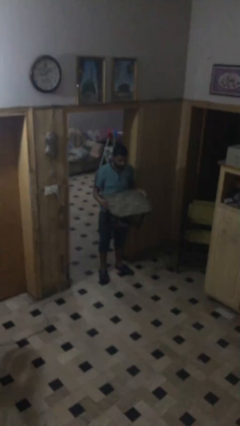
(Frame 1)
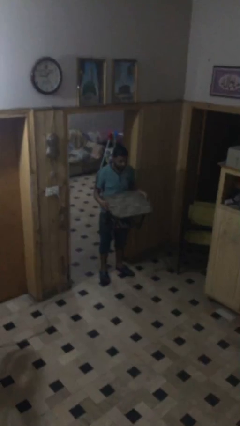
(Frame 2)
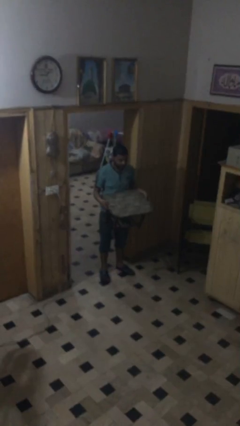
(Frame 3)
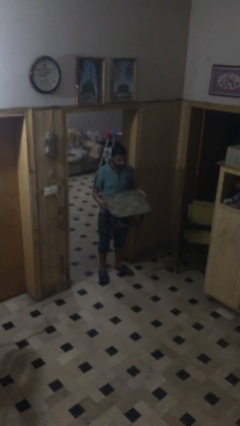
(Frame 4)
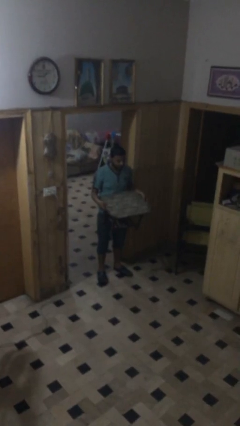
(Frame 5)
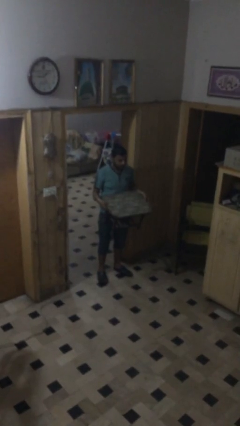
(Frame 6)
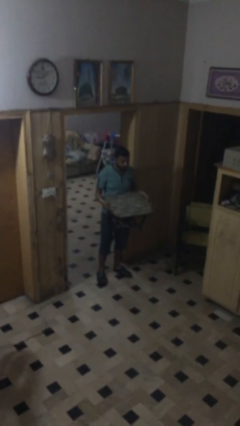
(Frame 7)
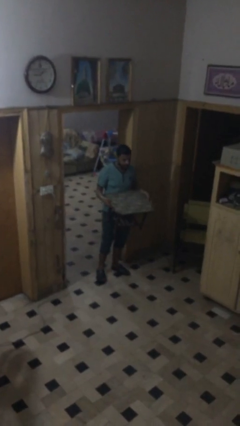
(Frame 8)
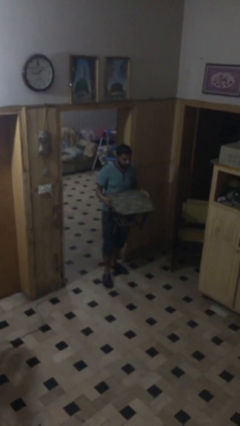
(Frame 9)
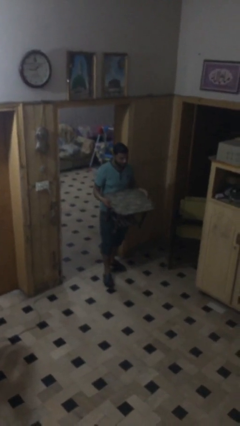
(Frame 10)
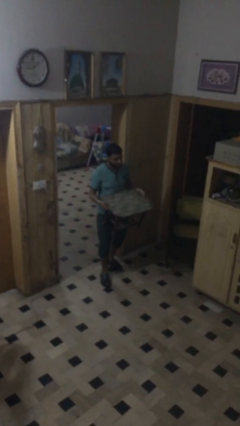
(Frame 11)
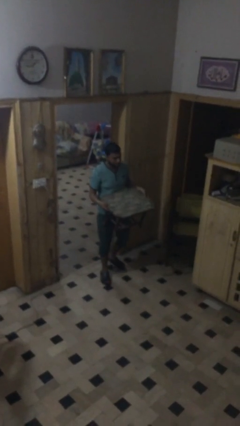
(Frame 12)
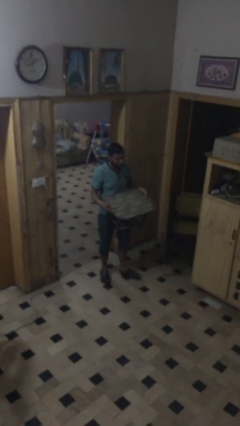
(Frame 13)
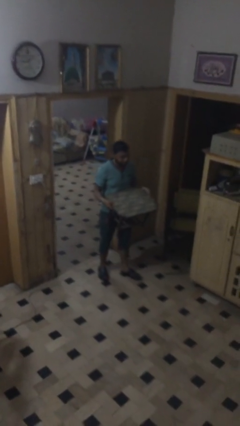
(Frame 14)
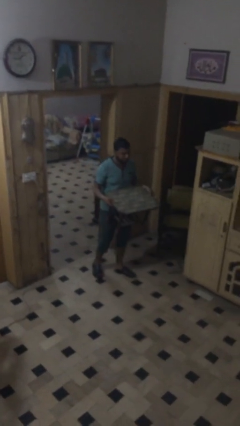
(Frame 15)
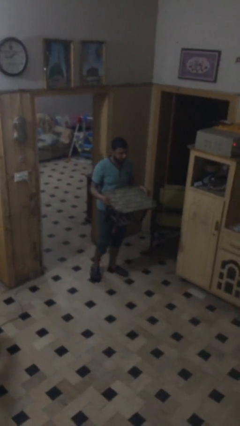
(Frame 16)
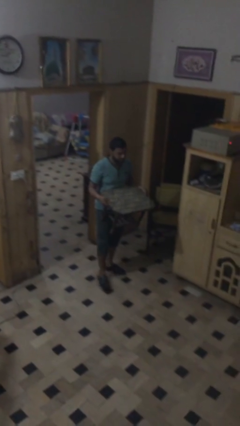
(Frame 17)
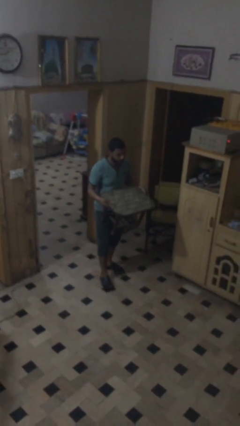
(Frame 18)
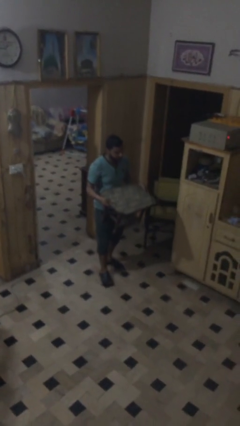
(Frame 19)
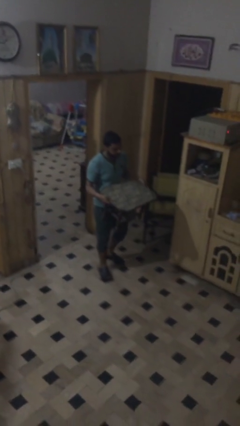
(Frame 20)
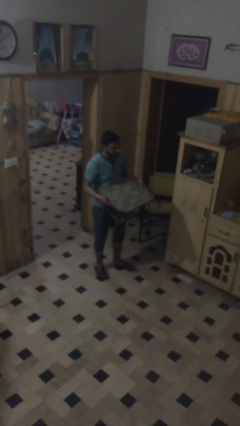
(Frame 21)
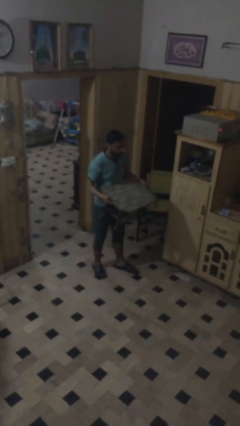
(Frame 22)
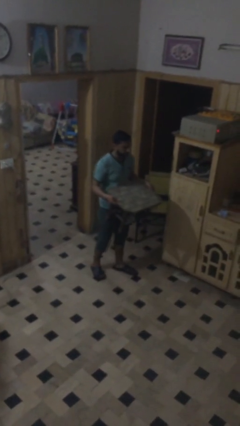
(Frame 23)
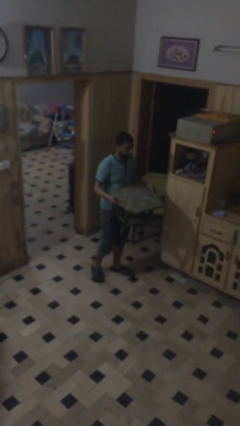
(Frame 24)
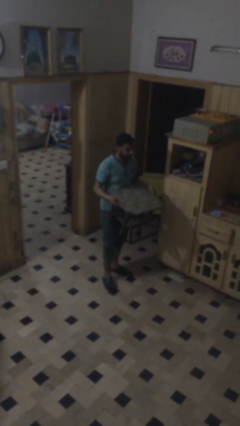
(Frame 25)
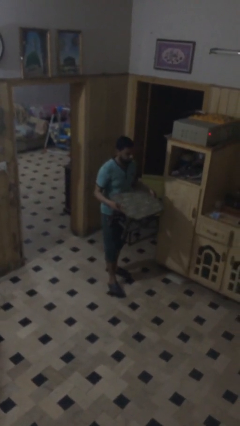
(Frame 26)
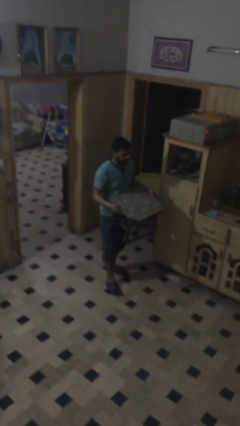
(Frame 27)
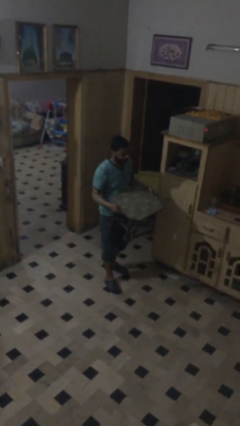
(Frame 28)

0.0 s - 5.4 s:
person carries heavy object

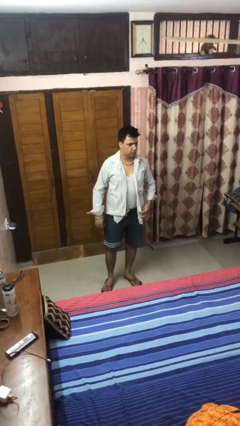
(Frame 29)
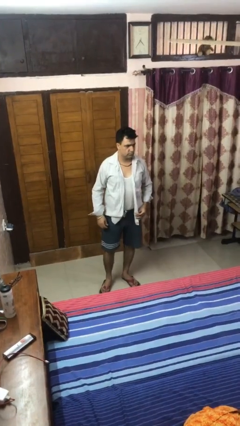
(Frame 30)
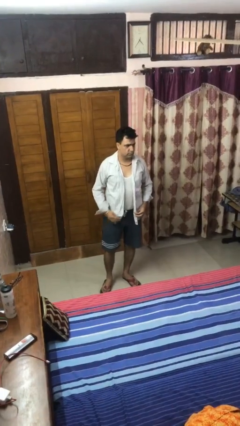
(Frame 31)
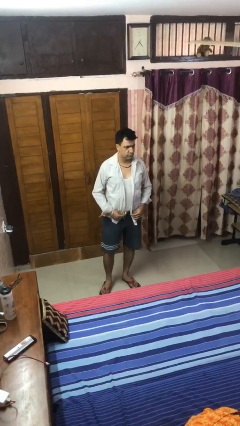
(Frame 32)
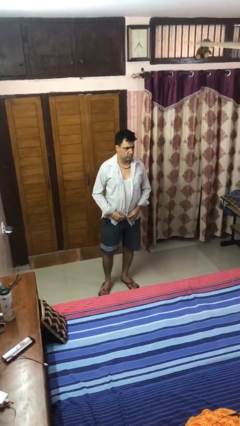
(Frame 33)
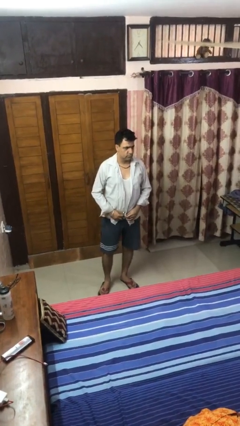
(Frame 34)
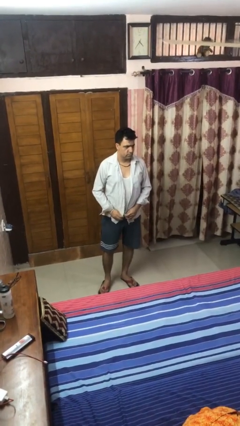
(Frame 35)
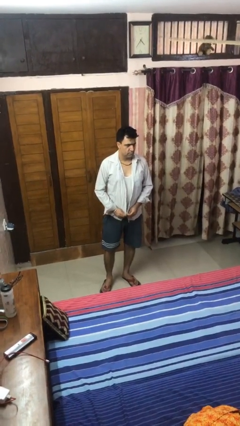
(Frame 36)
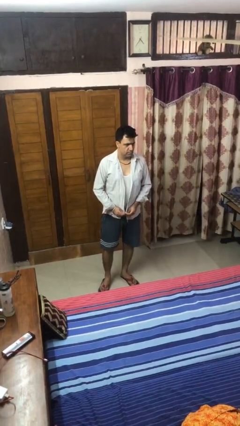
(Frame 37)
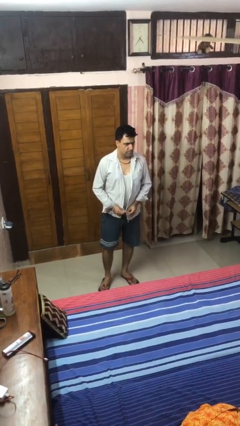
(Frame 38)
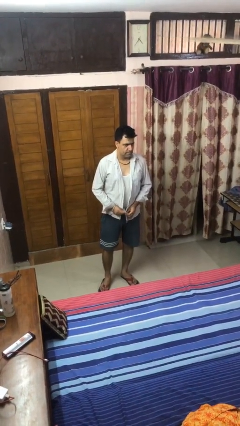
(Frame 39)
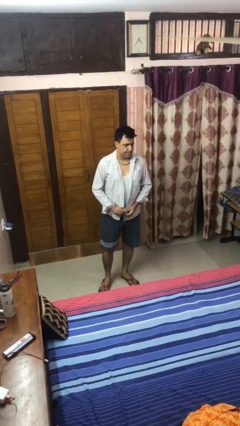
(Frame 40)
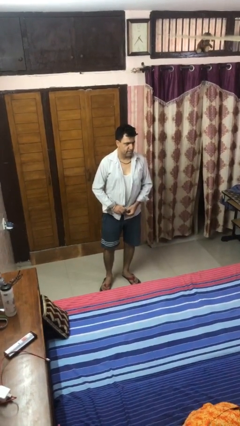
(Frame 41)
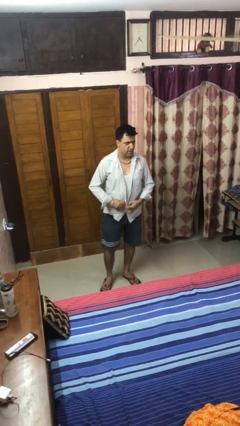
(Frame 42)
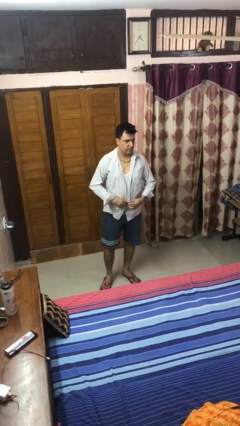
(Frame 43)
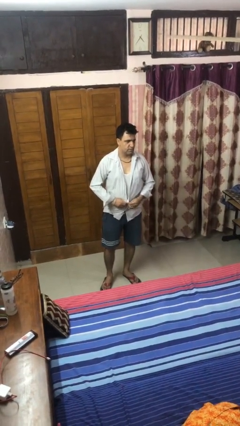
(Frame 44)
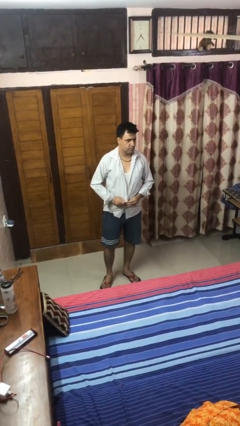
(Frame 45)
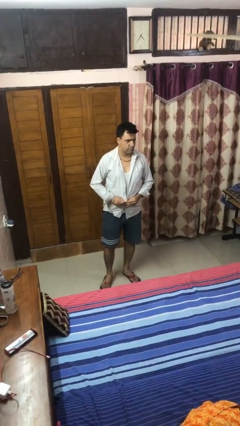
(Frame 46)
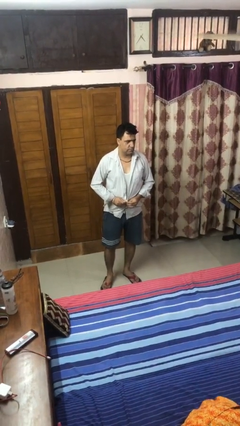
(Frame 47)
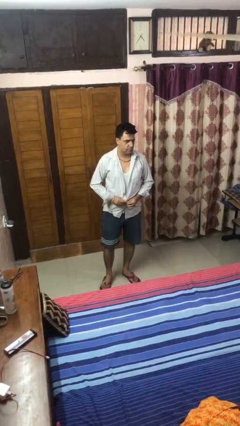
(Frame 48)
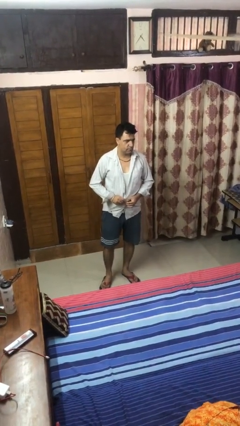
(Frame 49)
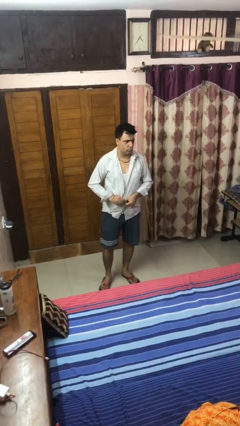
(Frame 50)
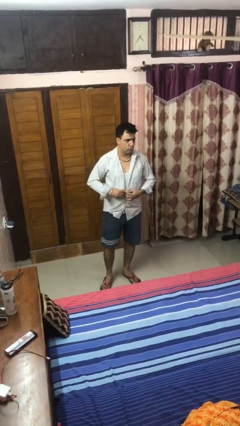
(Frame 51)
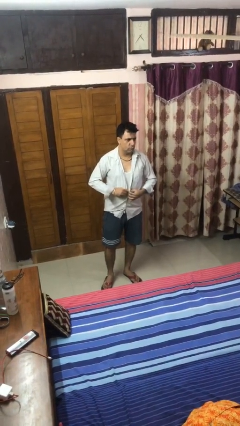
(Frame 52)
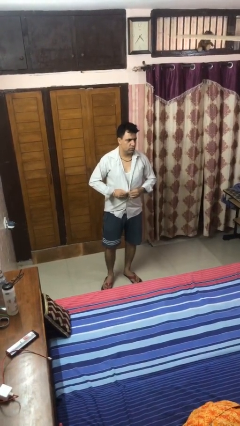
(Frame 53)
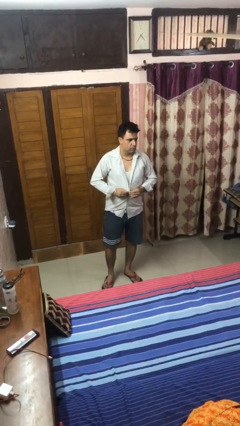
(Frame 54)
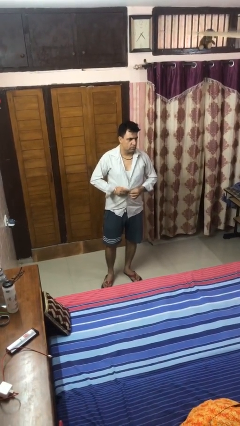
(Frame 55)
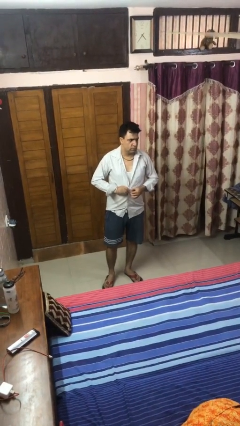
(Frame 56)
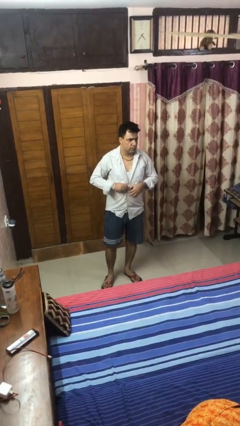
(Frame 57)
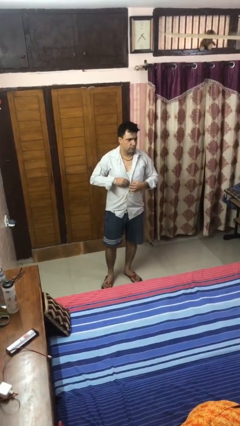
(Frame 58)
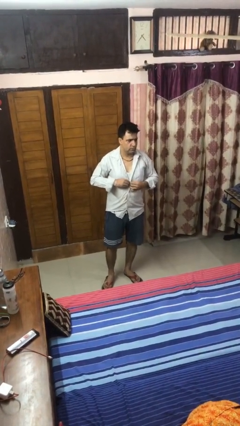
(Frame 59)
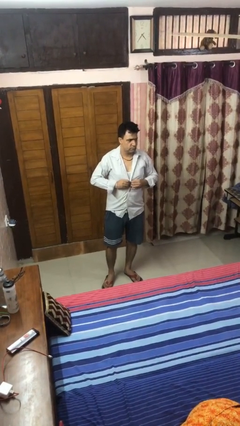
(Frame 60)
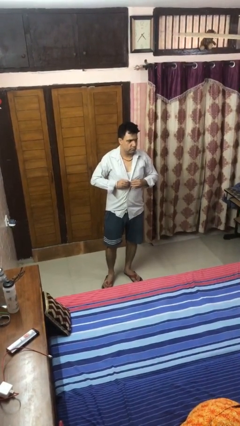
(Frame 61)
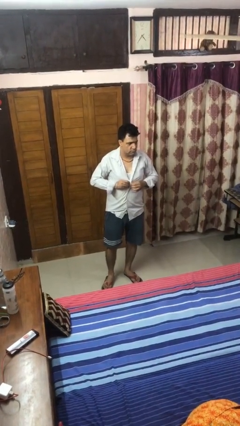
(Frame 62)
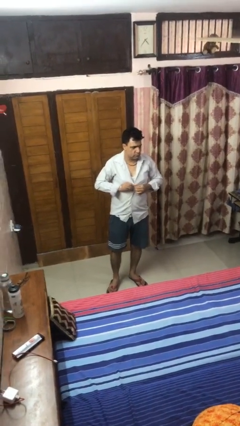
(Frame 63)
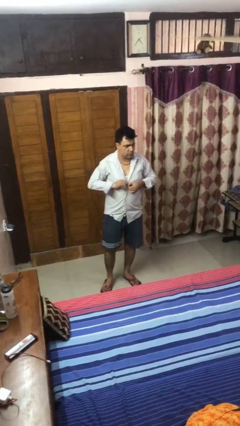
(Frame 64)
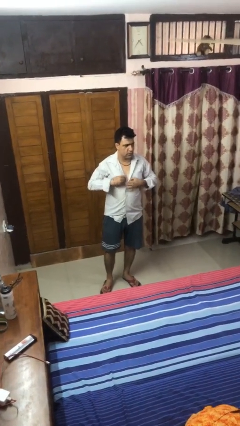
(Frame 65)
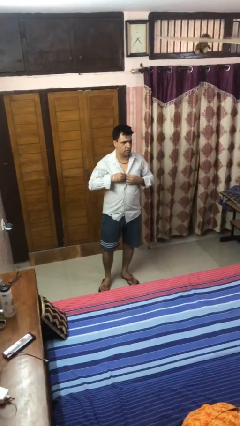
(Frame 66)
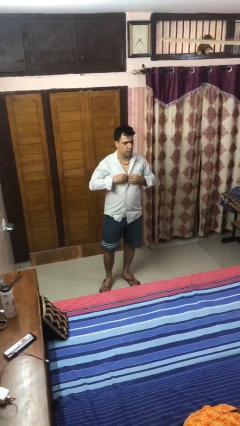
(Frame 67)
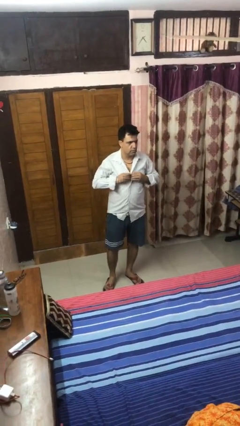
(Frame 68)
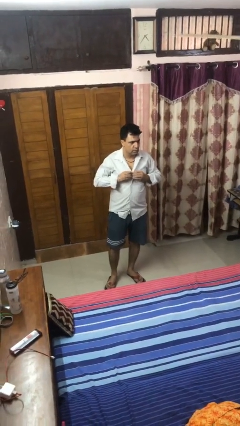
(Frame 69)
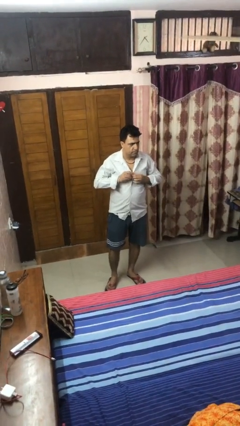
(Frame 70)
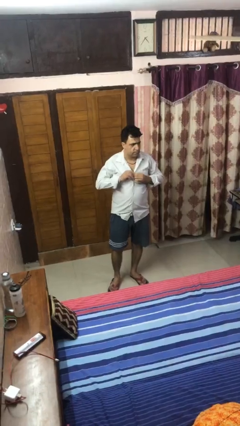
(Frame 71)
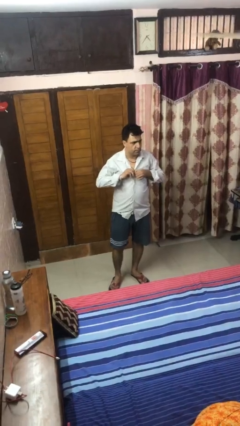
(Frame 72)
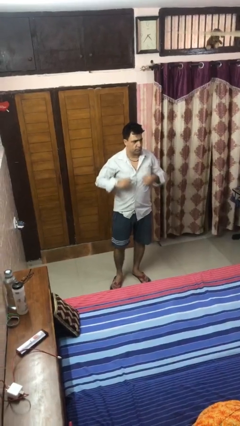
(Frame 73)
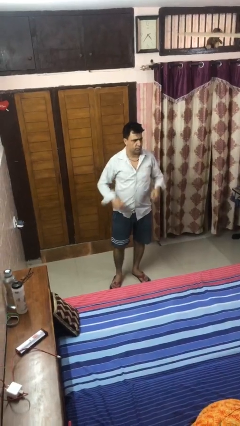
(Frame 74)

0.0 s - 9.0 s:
person buttons shirt

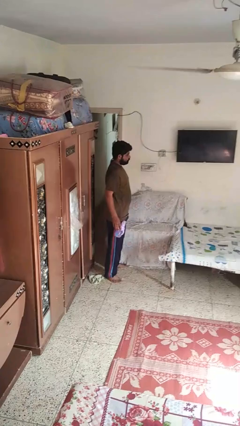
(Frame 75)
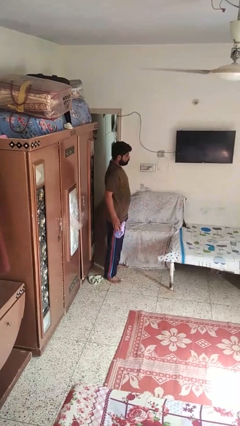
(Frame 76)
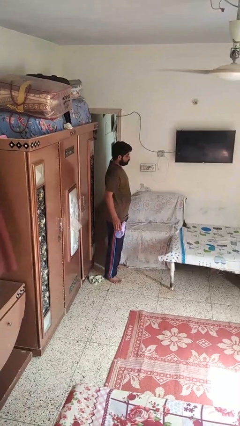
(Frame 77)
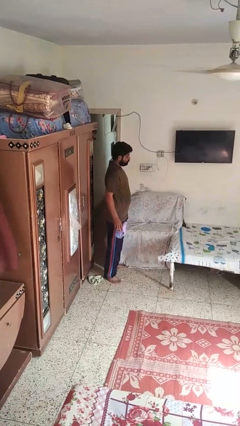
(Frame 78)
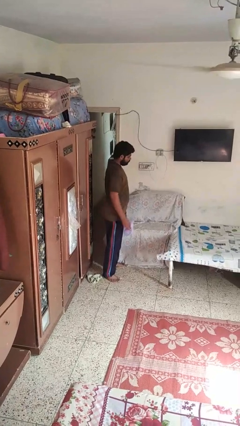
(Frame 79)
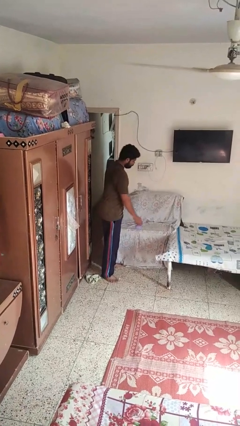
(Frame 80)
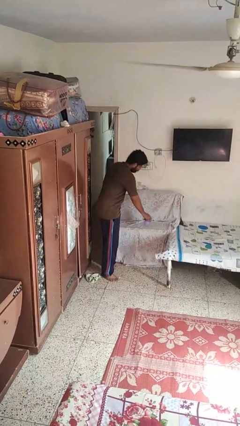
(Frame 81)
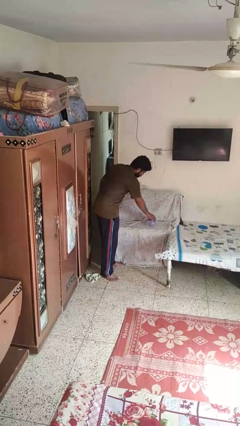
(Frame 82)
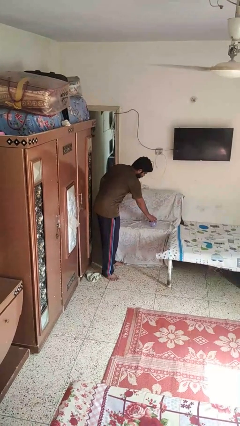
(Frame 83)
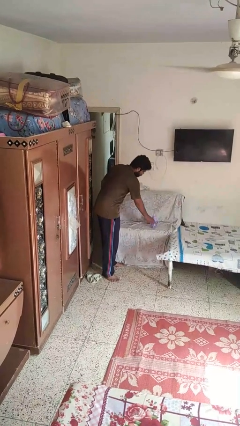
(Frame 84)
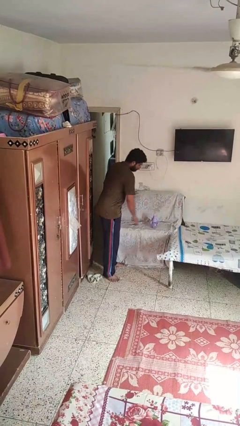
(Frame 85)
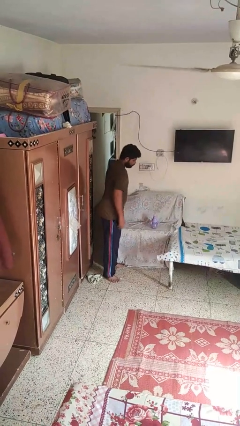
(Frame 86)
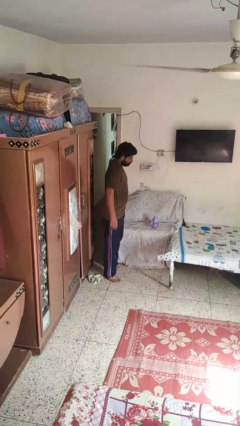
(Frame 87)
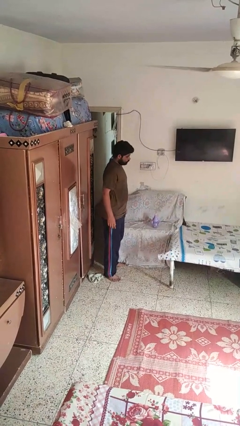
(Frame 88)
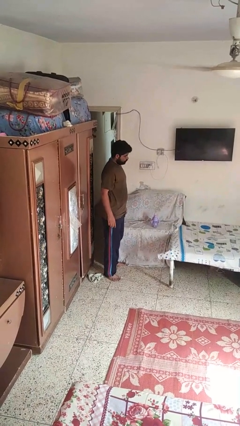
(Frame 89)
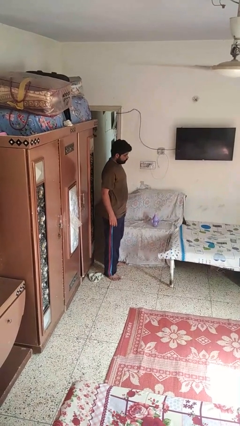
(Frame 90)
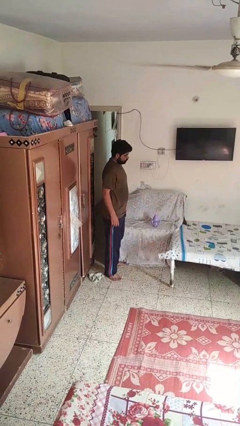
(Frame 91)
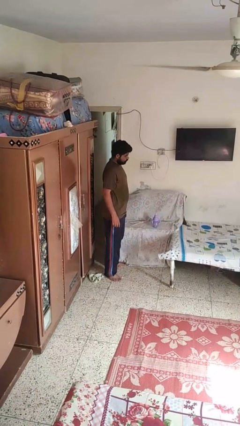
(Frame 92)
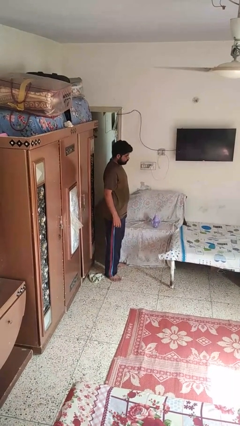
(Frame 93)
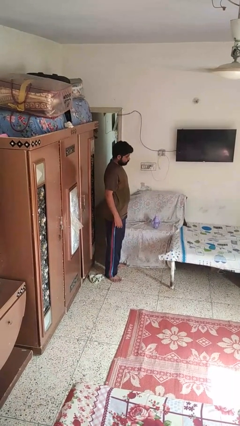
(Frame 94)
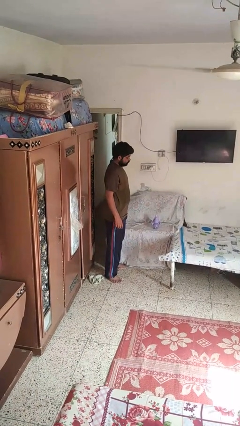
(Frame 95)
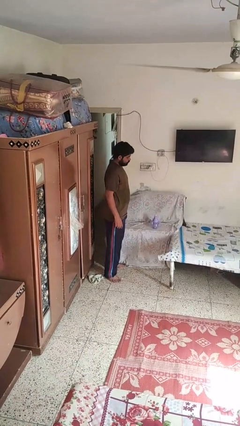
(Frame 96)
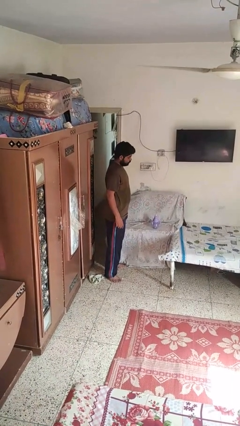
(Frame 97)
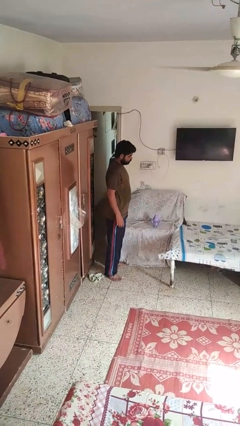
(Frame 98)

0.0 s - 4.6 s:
person puts down object on couch
